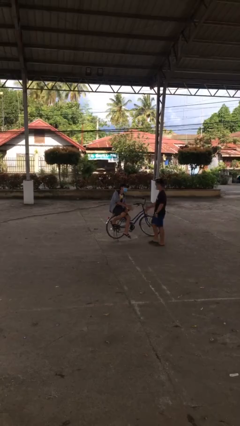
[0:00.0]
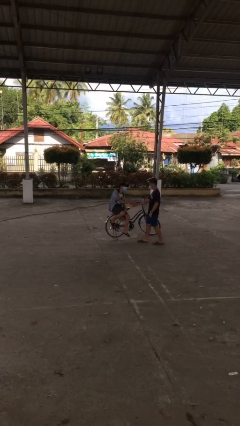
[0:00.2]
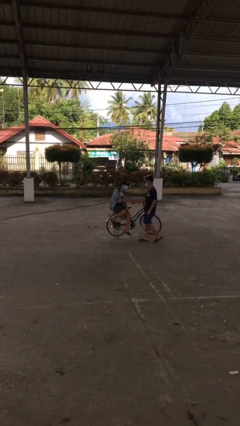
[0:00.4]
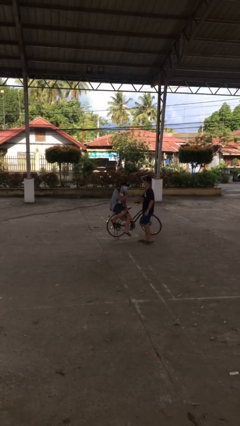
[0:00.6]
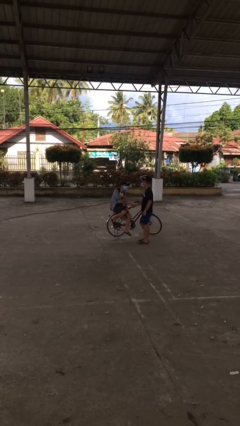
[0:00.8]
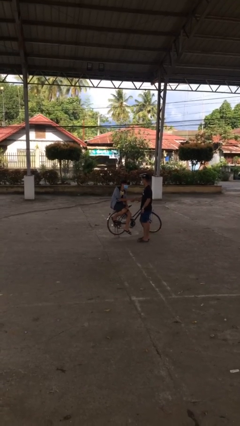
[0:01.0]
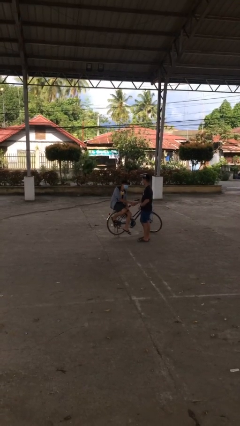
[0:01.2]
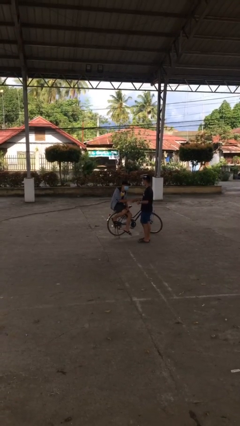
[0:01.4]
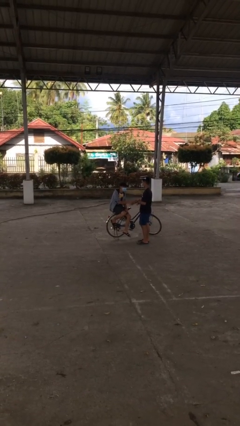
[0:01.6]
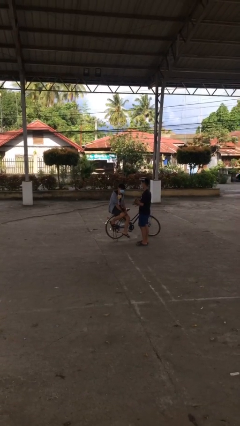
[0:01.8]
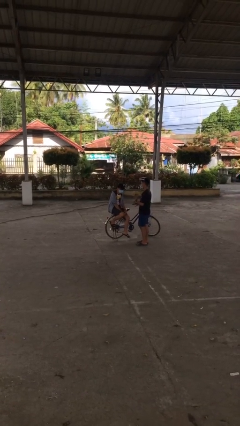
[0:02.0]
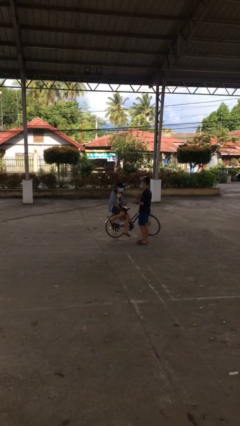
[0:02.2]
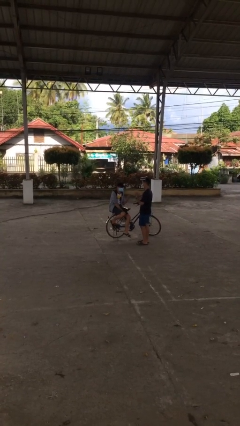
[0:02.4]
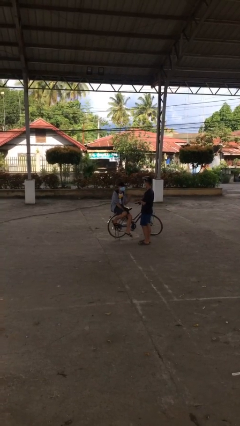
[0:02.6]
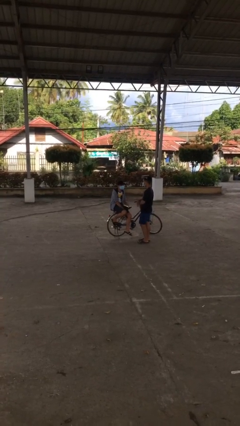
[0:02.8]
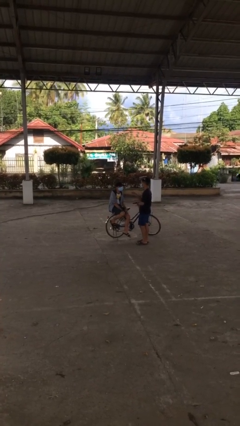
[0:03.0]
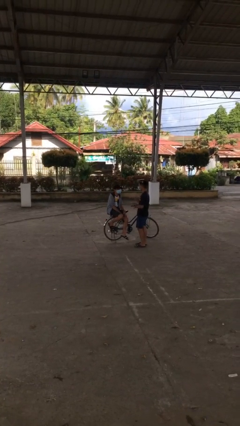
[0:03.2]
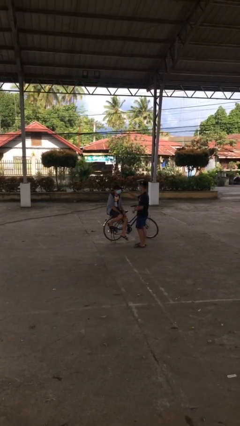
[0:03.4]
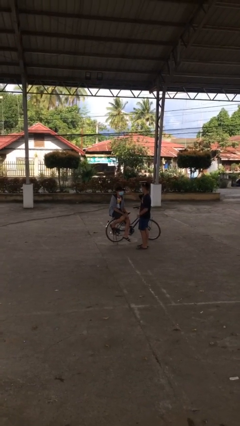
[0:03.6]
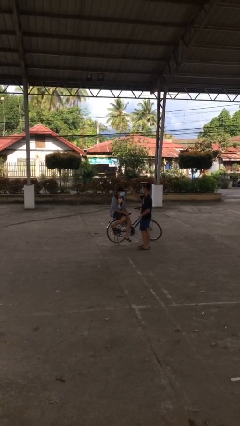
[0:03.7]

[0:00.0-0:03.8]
person shakes hand

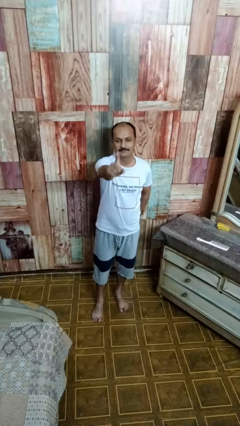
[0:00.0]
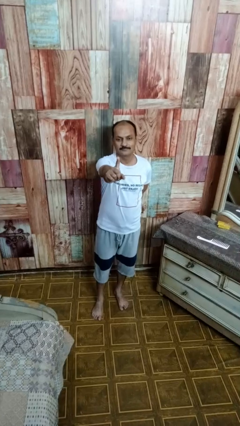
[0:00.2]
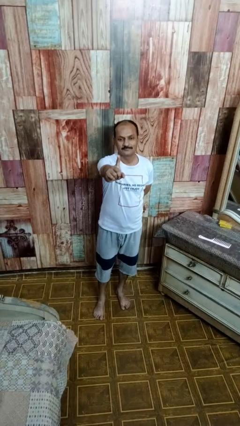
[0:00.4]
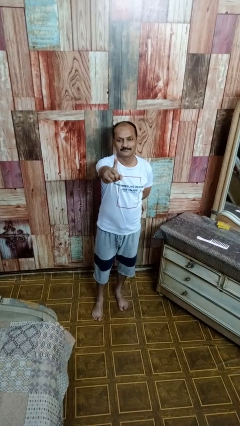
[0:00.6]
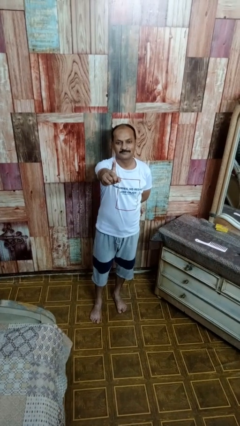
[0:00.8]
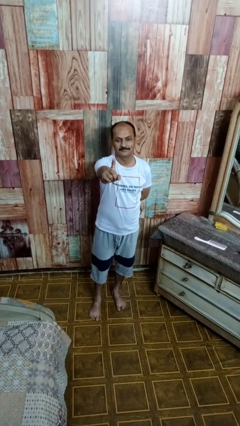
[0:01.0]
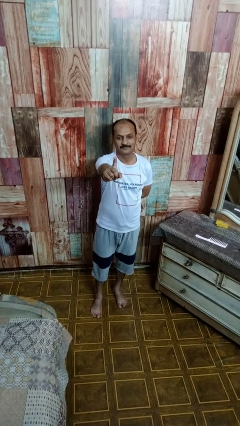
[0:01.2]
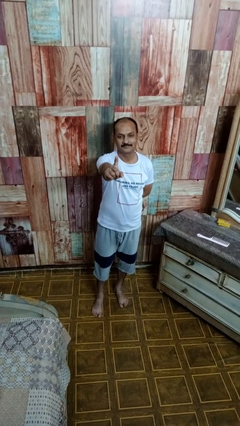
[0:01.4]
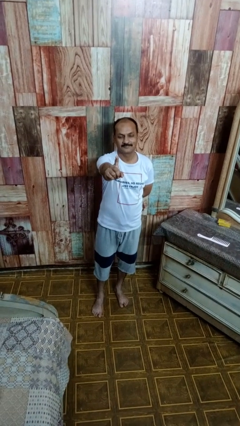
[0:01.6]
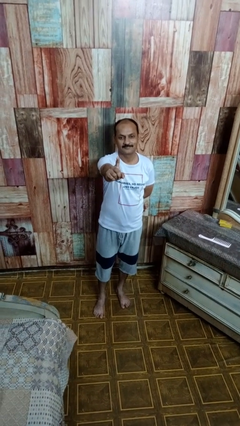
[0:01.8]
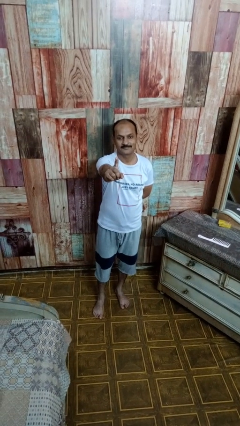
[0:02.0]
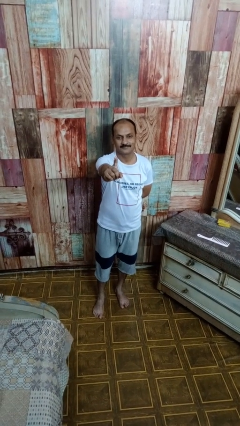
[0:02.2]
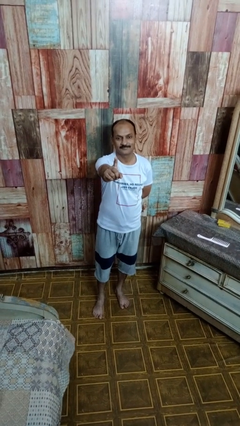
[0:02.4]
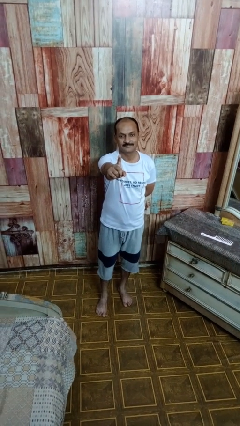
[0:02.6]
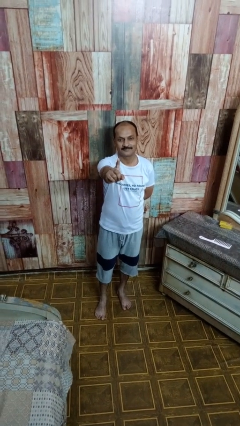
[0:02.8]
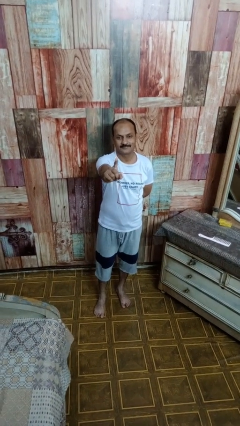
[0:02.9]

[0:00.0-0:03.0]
person gestures number one

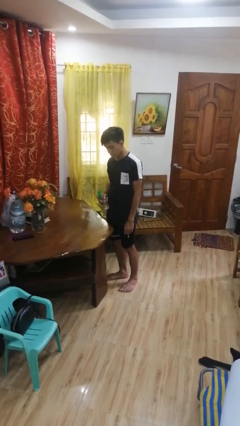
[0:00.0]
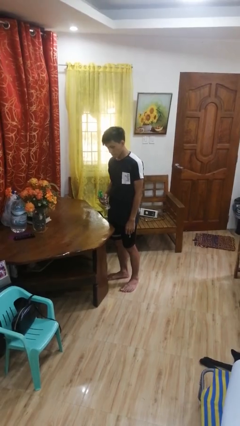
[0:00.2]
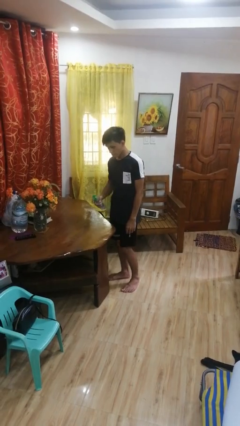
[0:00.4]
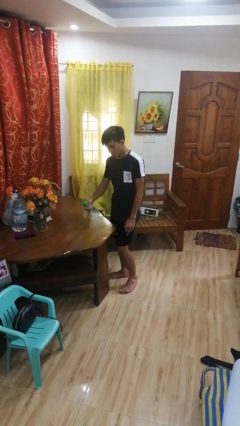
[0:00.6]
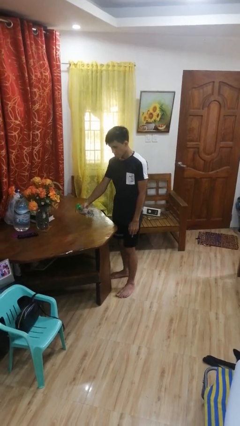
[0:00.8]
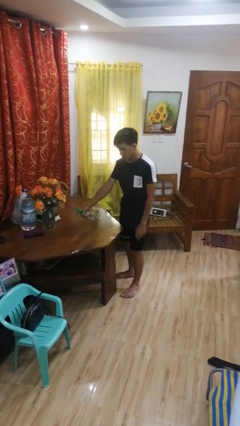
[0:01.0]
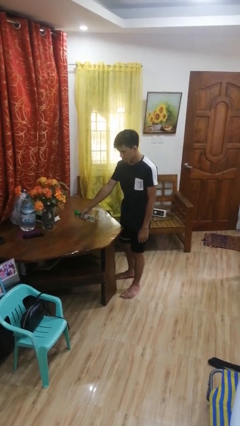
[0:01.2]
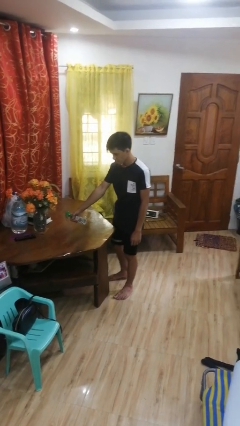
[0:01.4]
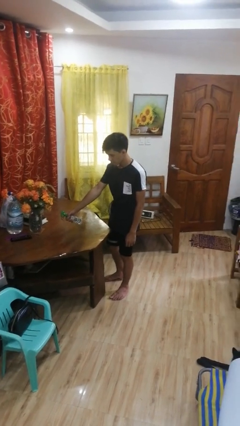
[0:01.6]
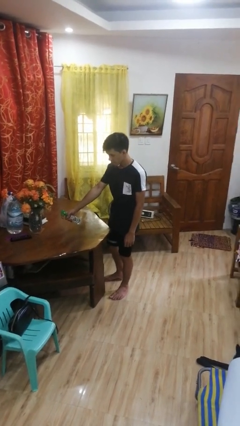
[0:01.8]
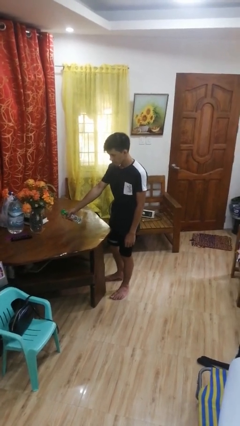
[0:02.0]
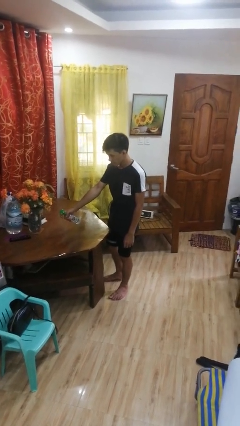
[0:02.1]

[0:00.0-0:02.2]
person sprays from bottle

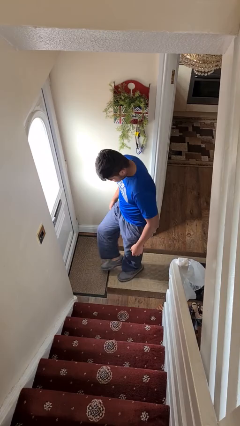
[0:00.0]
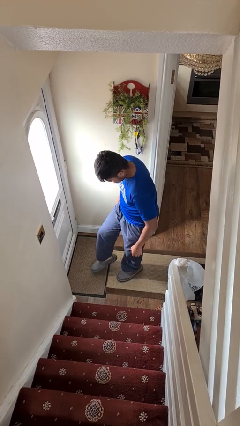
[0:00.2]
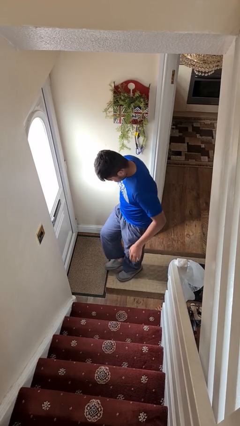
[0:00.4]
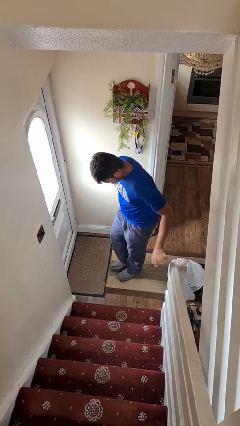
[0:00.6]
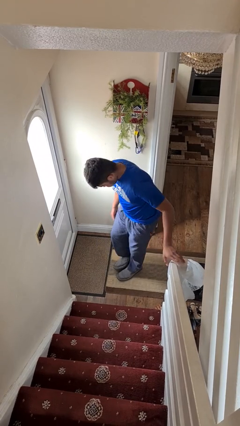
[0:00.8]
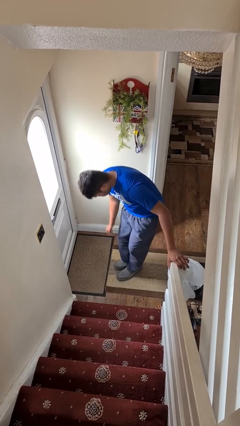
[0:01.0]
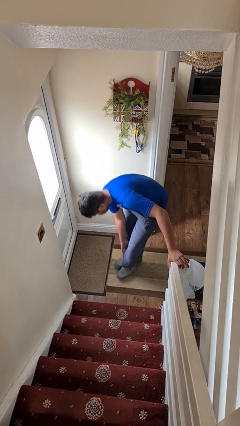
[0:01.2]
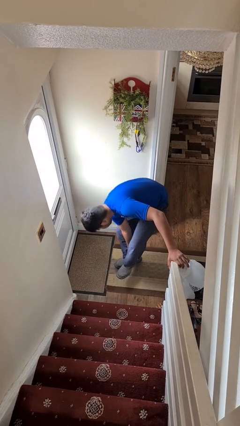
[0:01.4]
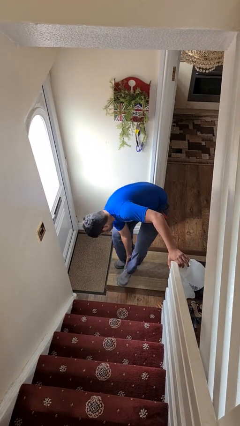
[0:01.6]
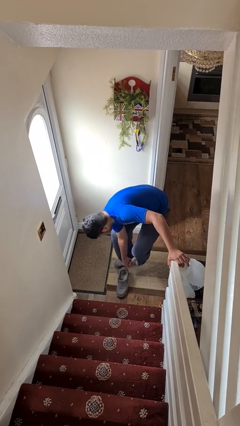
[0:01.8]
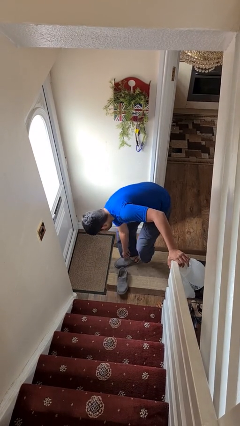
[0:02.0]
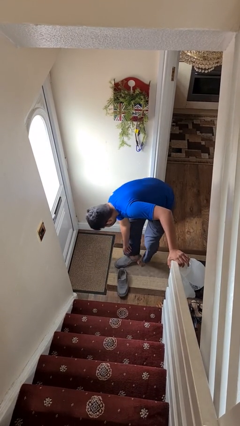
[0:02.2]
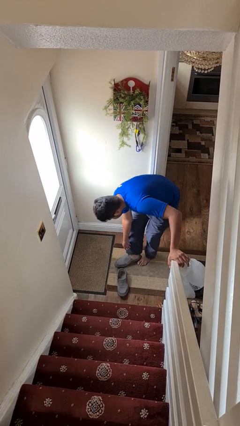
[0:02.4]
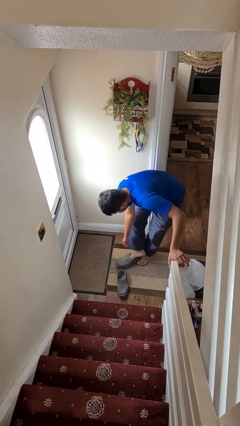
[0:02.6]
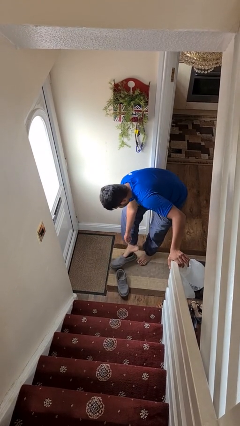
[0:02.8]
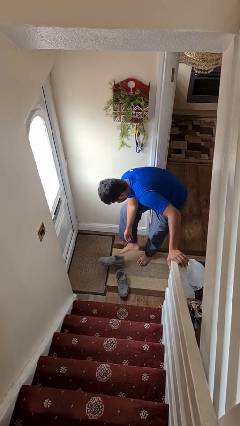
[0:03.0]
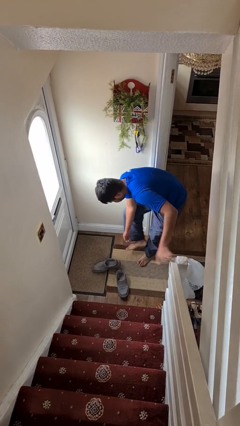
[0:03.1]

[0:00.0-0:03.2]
person takes off shoes

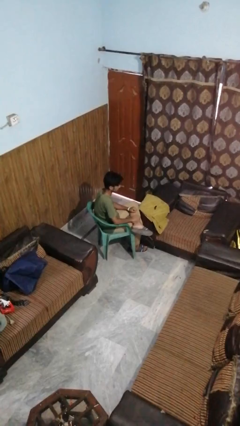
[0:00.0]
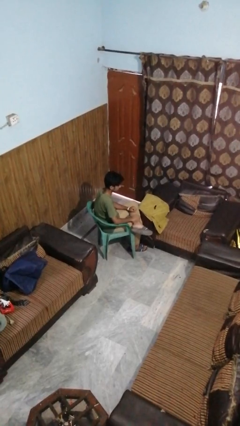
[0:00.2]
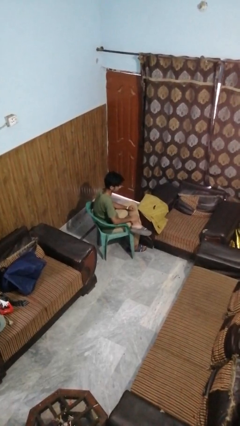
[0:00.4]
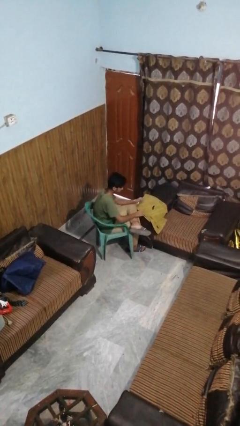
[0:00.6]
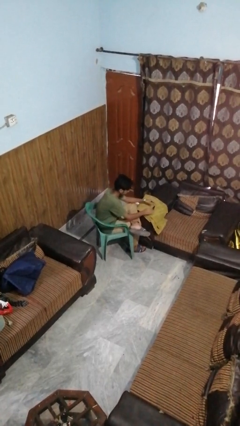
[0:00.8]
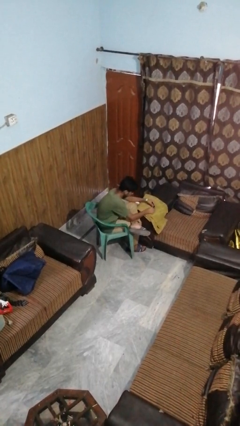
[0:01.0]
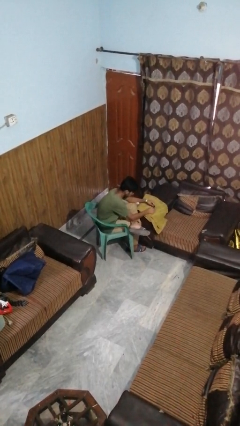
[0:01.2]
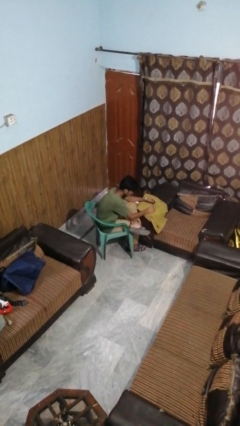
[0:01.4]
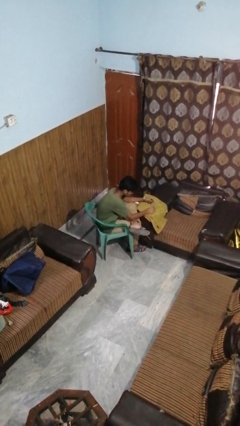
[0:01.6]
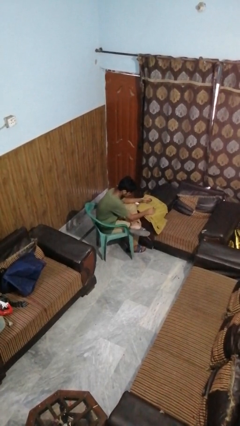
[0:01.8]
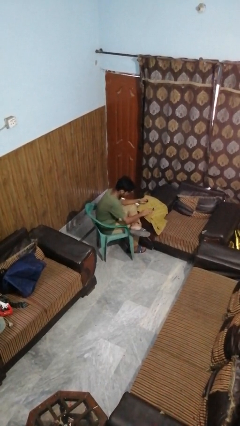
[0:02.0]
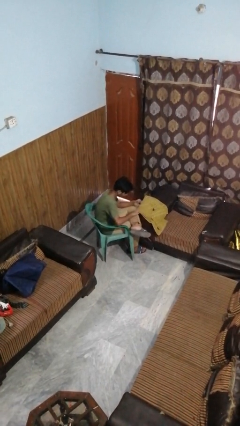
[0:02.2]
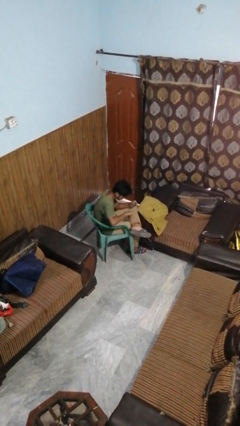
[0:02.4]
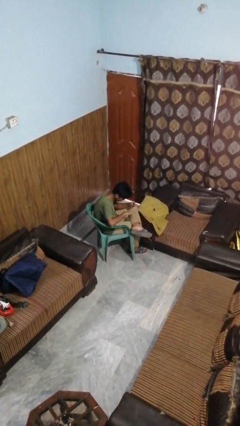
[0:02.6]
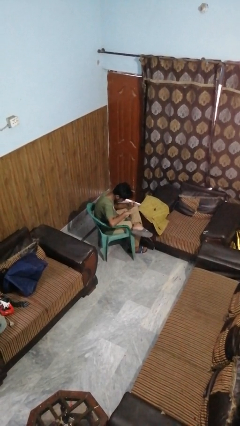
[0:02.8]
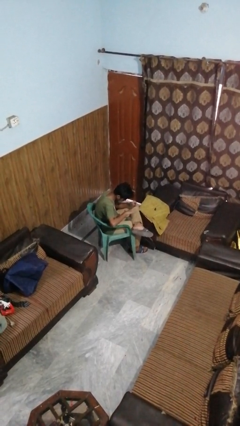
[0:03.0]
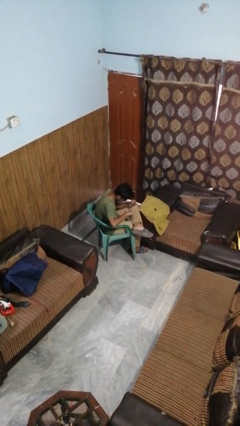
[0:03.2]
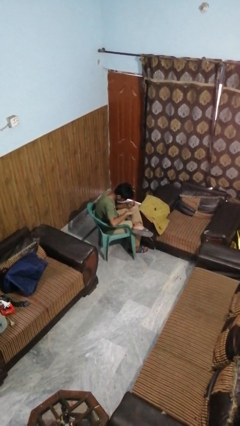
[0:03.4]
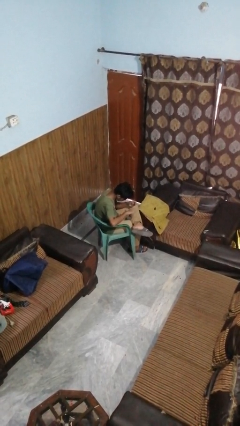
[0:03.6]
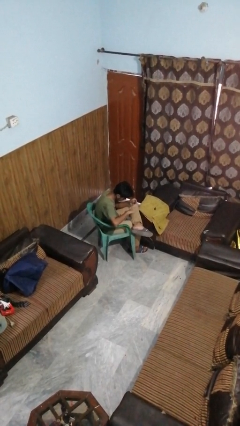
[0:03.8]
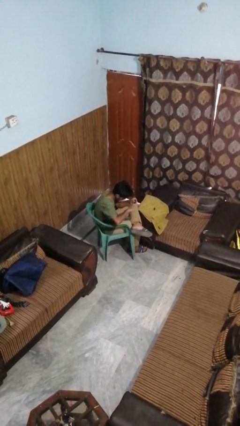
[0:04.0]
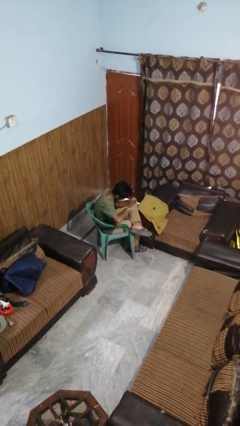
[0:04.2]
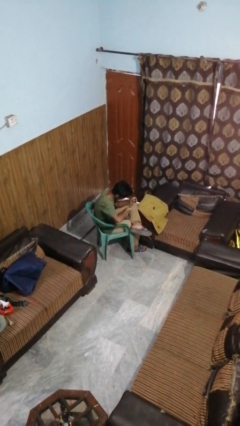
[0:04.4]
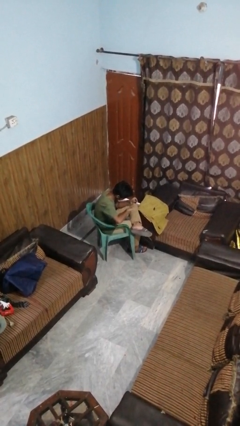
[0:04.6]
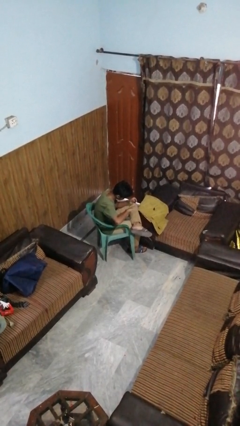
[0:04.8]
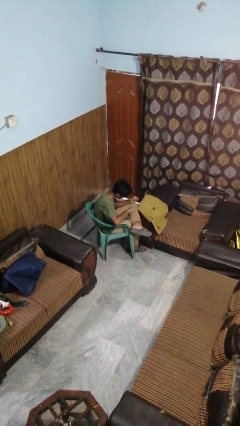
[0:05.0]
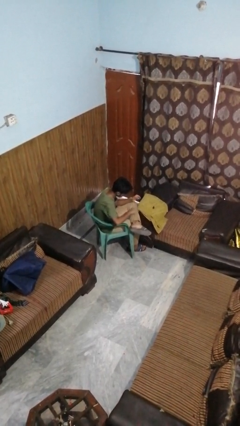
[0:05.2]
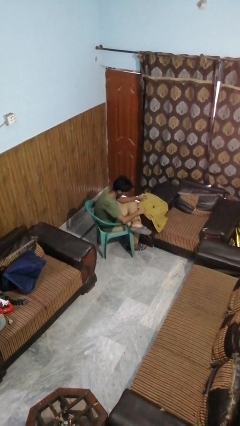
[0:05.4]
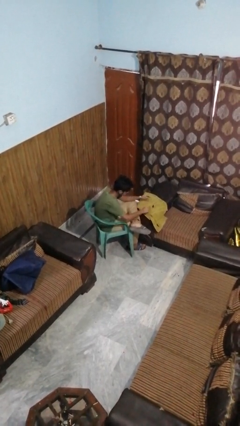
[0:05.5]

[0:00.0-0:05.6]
person paints fingernails
